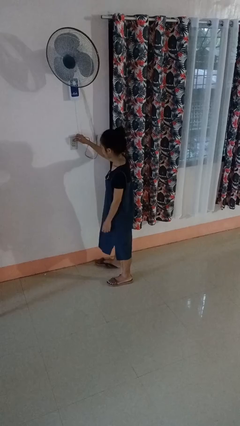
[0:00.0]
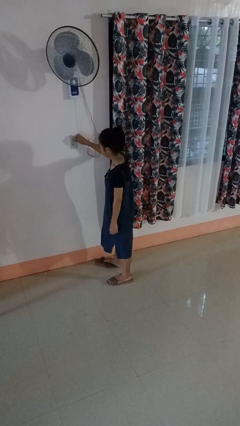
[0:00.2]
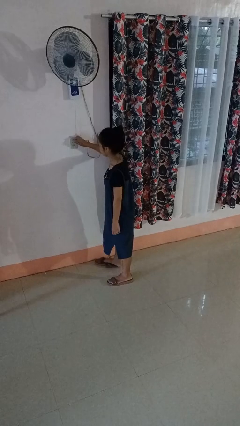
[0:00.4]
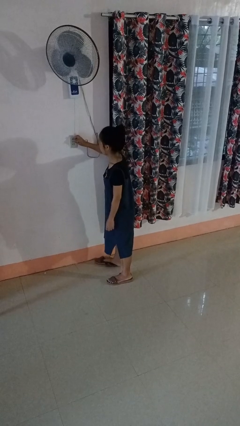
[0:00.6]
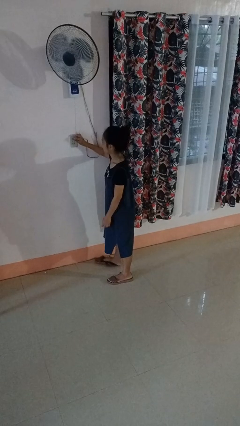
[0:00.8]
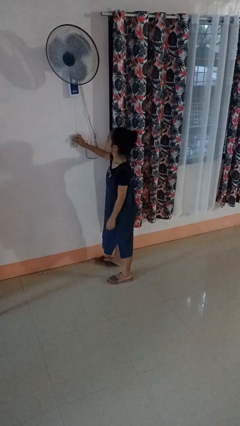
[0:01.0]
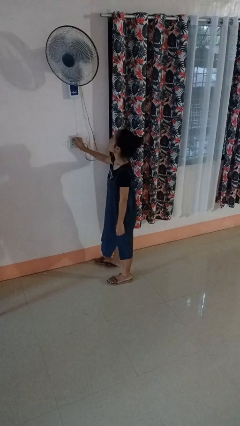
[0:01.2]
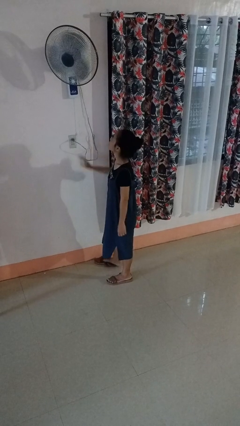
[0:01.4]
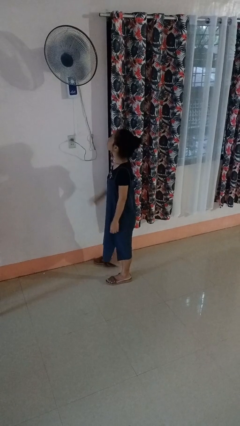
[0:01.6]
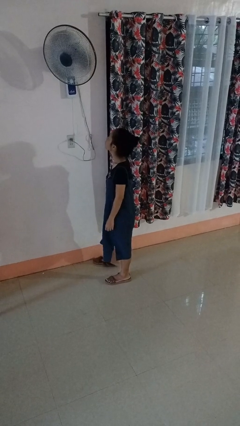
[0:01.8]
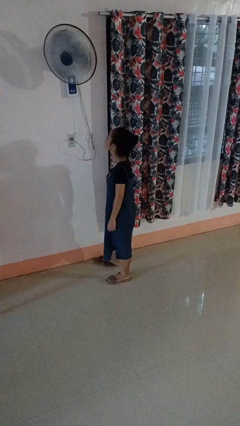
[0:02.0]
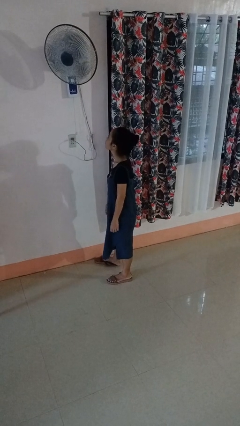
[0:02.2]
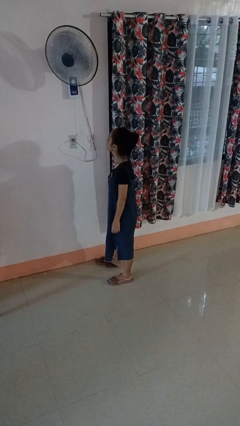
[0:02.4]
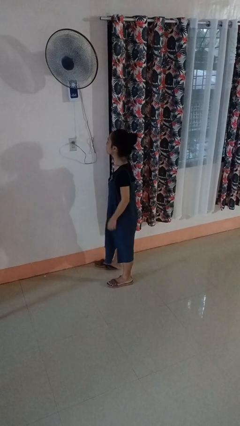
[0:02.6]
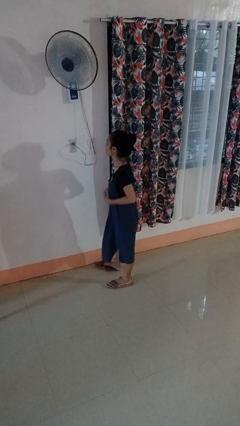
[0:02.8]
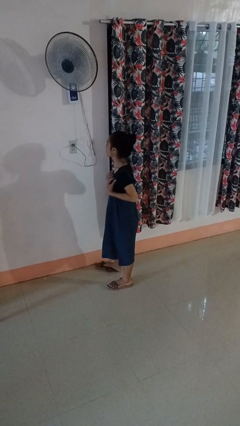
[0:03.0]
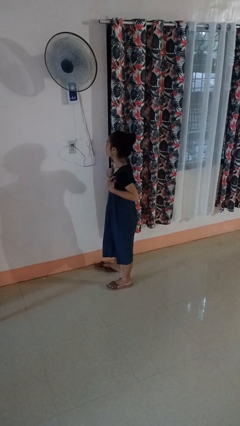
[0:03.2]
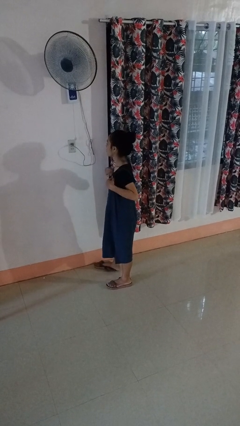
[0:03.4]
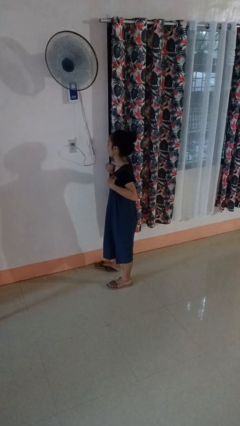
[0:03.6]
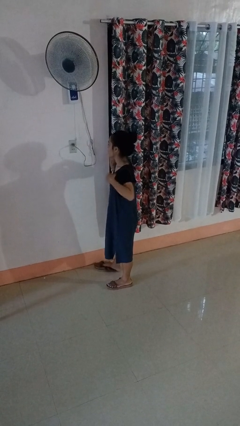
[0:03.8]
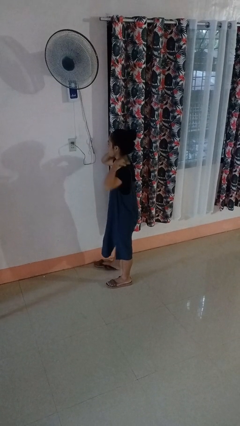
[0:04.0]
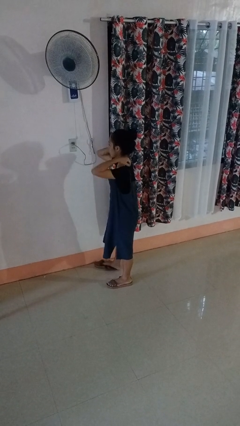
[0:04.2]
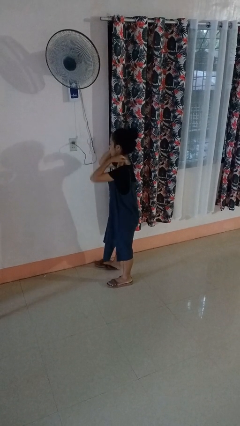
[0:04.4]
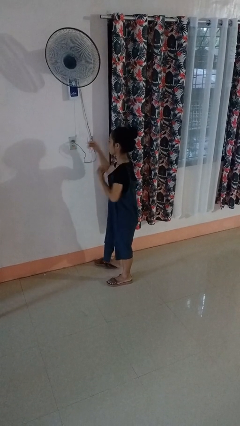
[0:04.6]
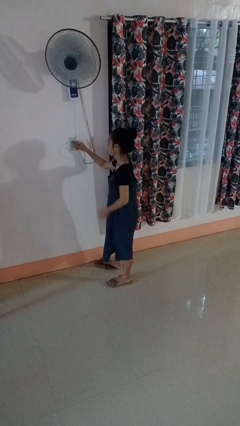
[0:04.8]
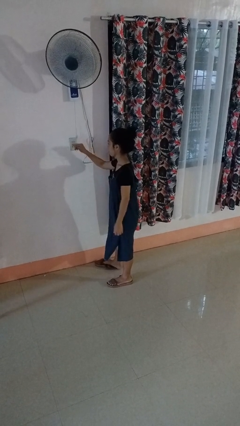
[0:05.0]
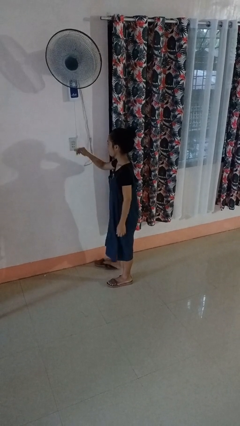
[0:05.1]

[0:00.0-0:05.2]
person plugs into electrical socket

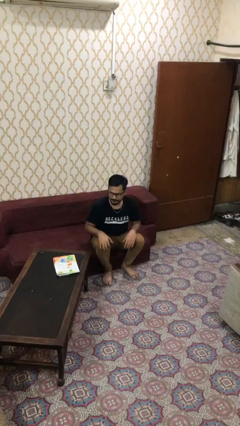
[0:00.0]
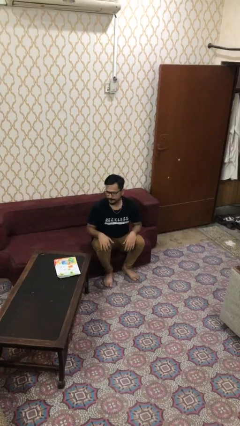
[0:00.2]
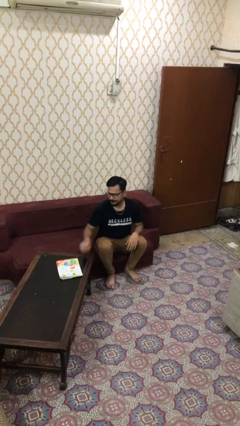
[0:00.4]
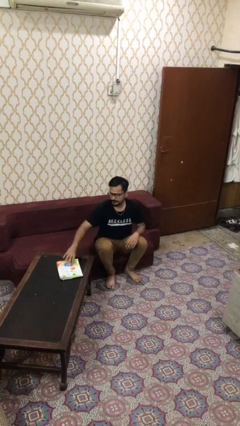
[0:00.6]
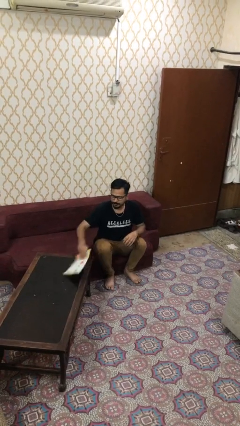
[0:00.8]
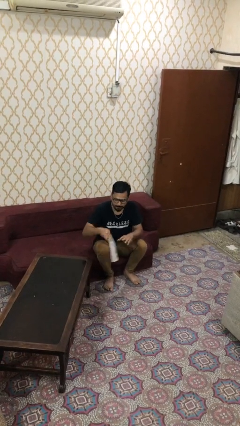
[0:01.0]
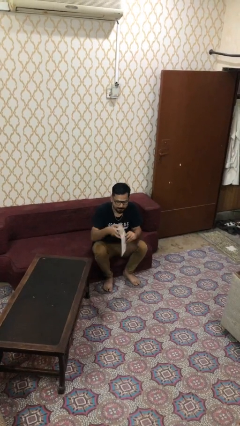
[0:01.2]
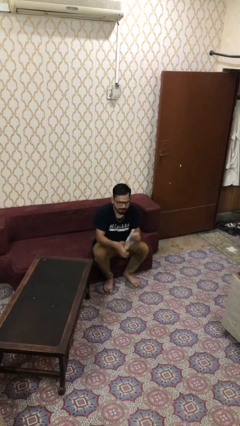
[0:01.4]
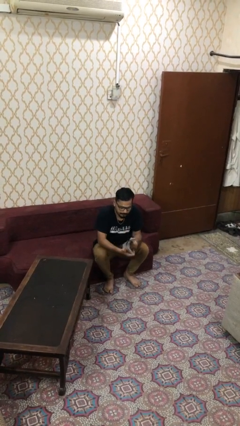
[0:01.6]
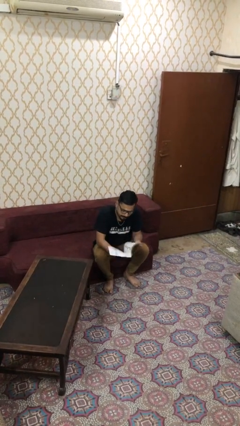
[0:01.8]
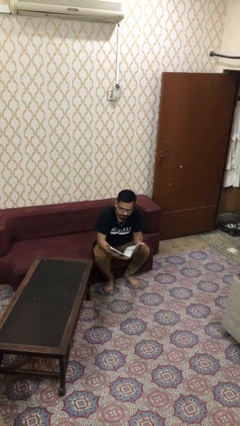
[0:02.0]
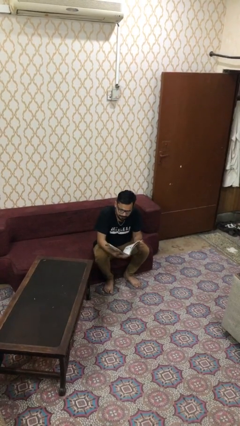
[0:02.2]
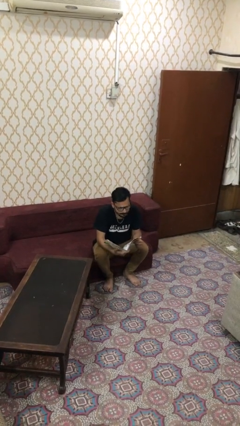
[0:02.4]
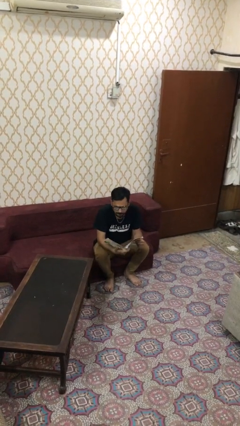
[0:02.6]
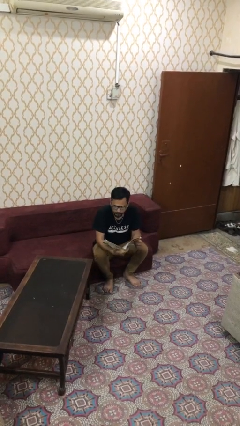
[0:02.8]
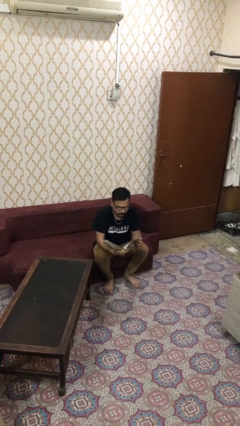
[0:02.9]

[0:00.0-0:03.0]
person reads document

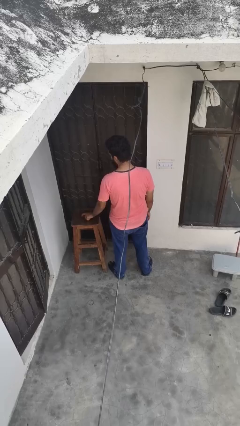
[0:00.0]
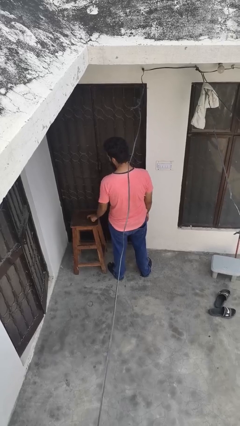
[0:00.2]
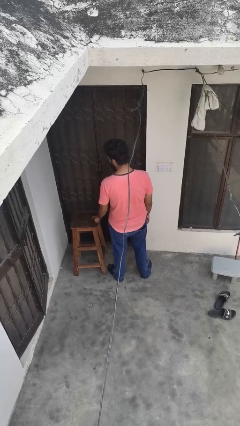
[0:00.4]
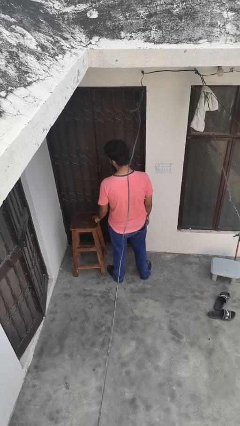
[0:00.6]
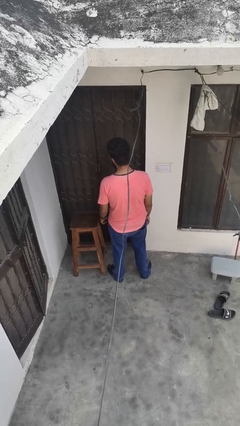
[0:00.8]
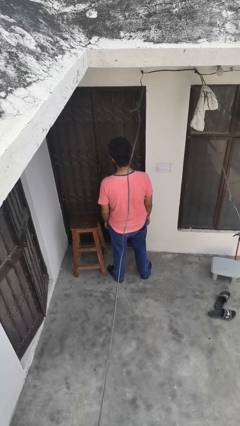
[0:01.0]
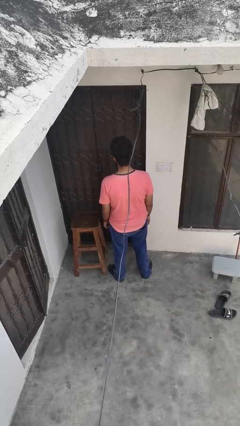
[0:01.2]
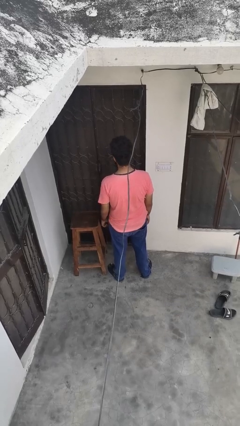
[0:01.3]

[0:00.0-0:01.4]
person taps object with finger

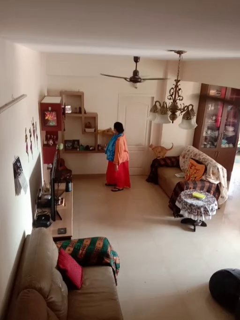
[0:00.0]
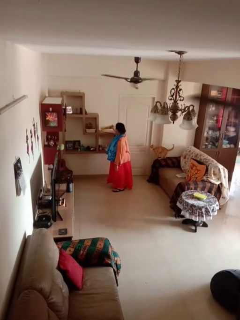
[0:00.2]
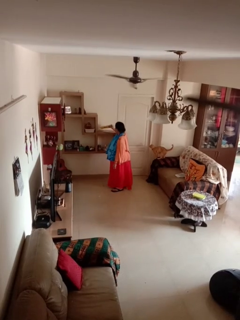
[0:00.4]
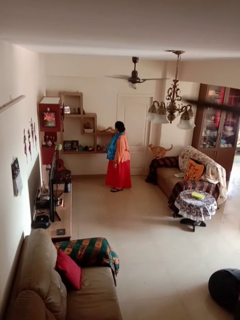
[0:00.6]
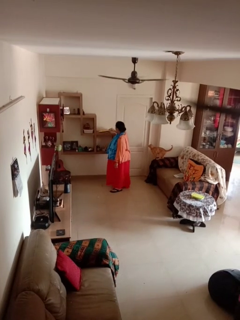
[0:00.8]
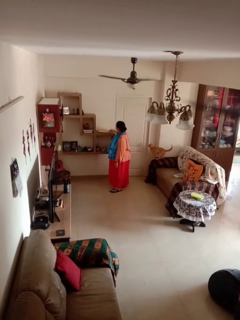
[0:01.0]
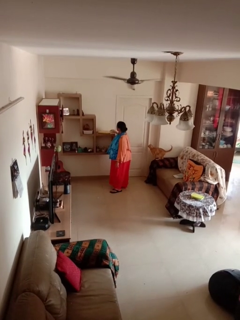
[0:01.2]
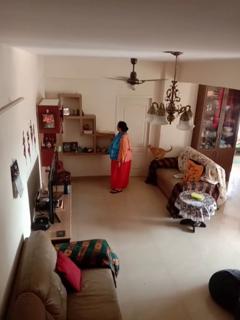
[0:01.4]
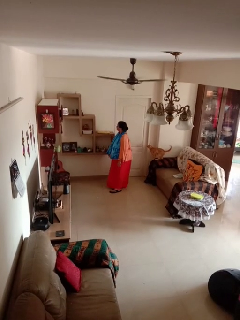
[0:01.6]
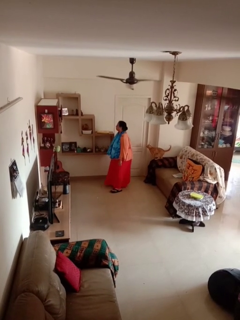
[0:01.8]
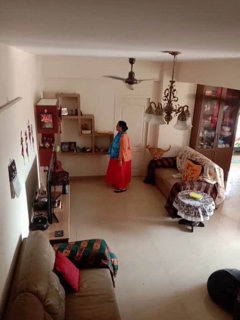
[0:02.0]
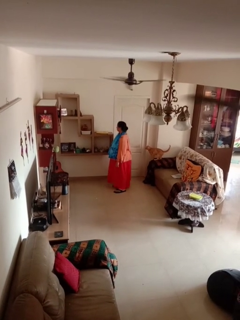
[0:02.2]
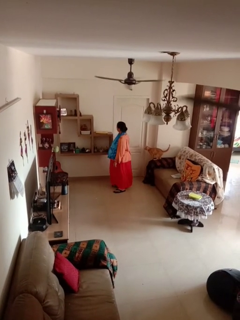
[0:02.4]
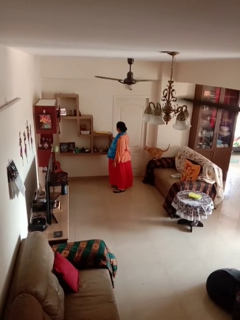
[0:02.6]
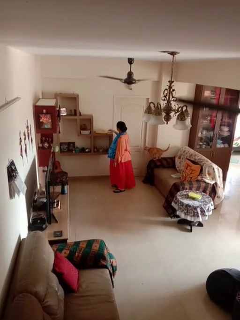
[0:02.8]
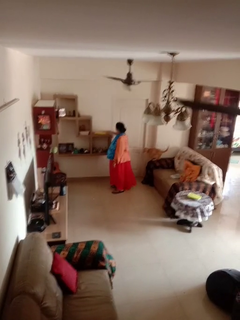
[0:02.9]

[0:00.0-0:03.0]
person puts down object on shelf

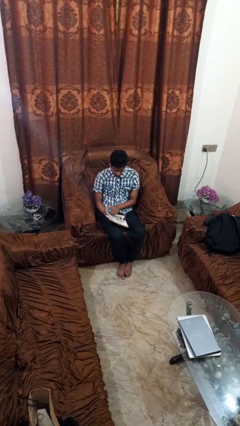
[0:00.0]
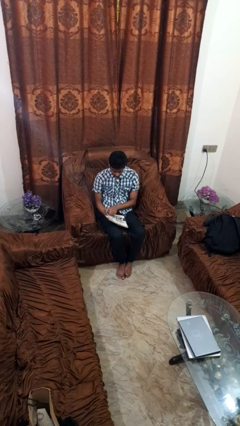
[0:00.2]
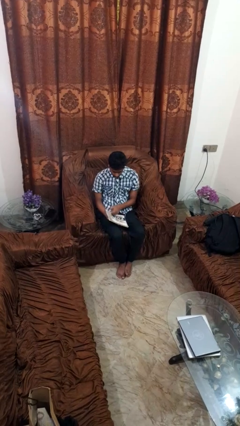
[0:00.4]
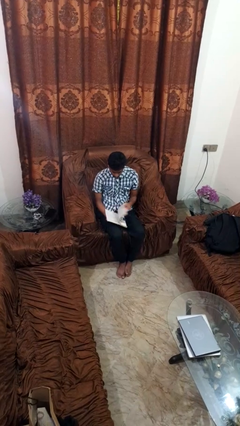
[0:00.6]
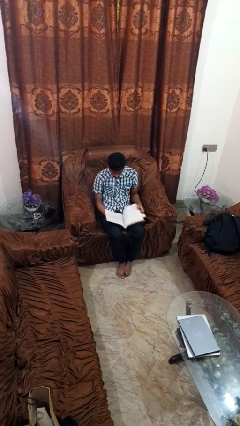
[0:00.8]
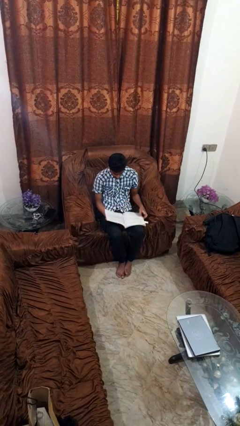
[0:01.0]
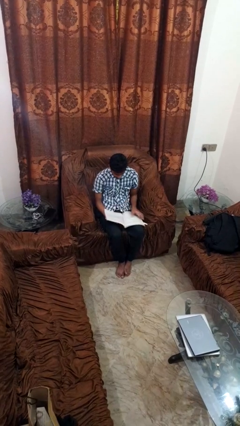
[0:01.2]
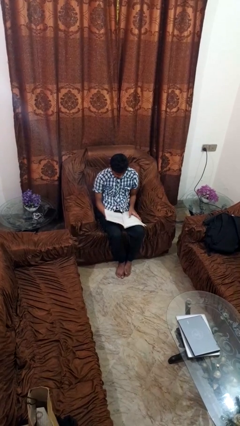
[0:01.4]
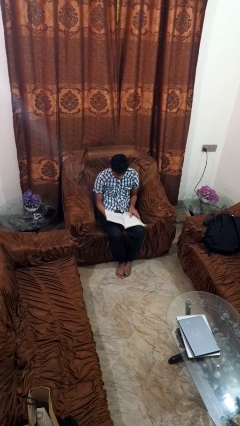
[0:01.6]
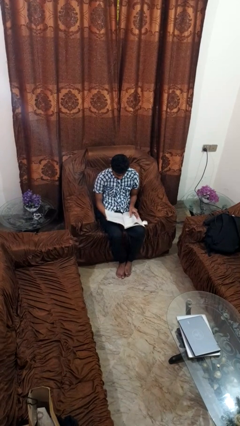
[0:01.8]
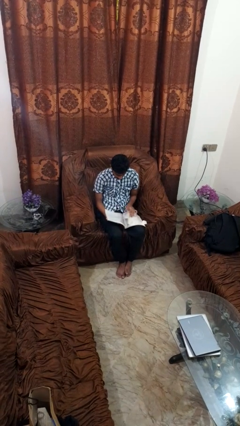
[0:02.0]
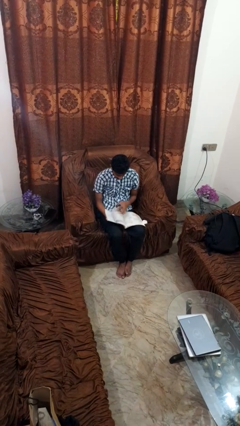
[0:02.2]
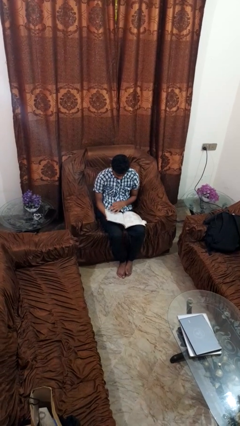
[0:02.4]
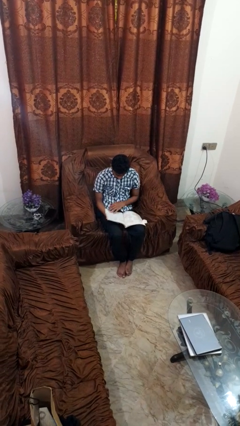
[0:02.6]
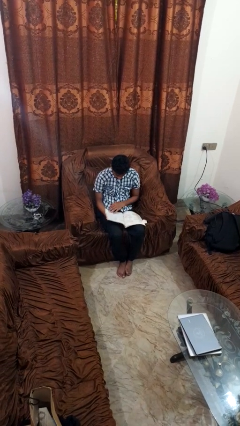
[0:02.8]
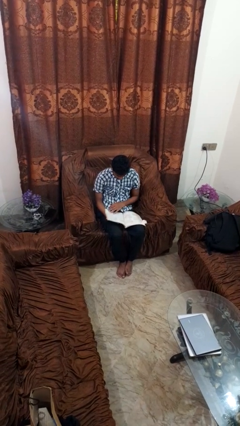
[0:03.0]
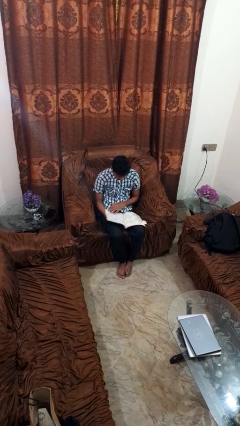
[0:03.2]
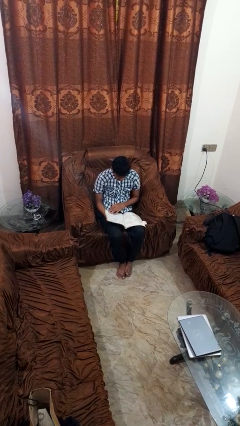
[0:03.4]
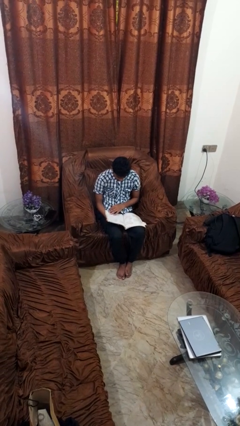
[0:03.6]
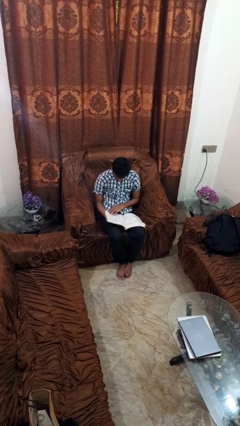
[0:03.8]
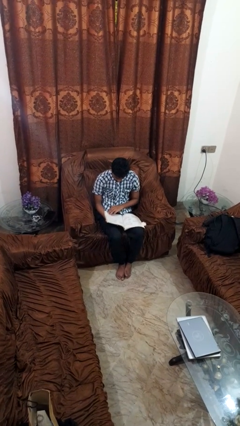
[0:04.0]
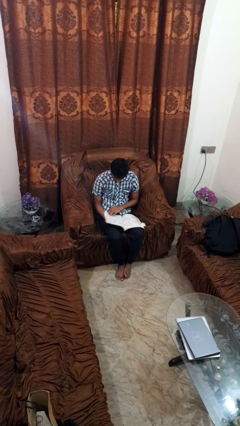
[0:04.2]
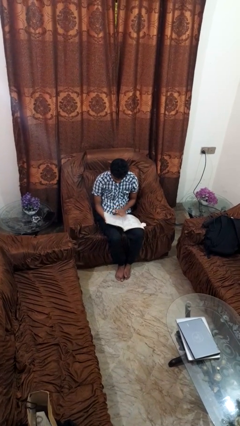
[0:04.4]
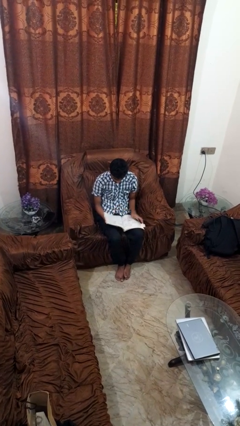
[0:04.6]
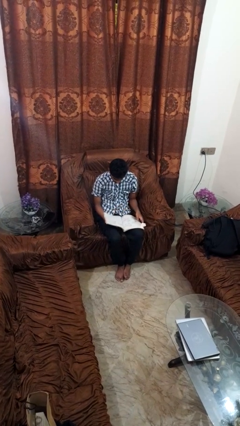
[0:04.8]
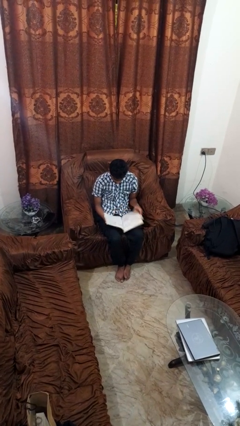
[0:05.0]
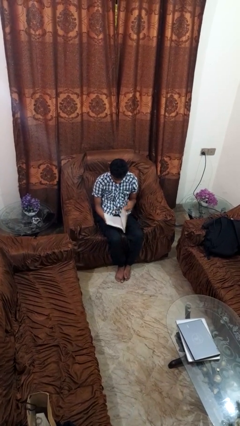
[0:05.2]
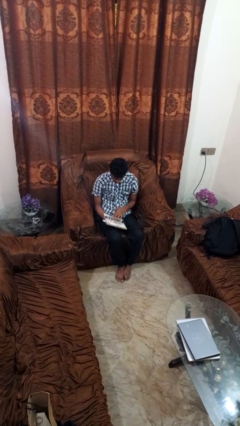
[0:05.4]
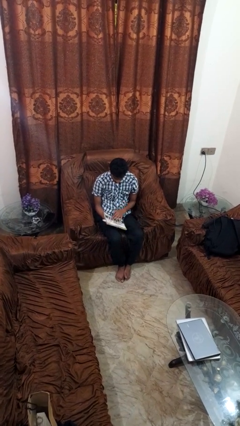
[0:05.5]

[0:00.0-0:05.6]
person reads magazine
